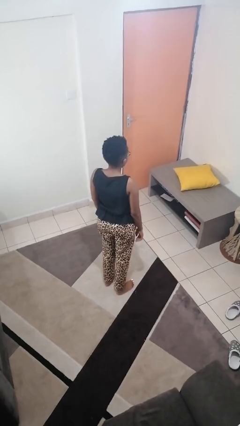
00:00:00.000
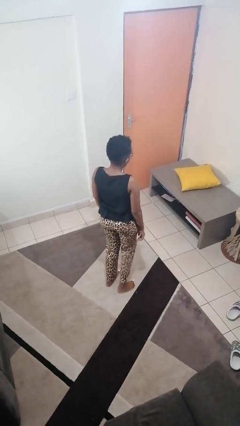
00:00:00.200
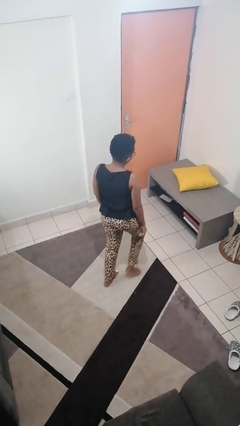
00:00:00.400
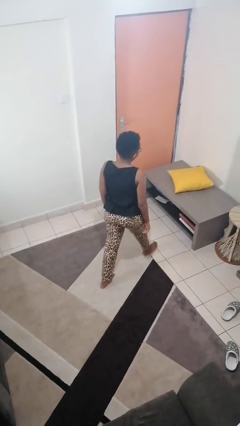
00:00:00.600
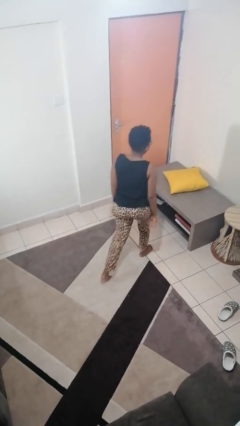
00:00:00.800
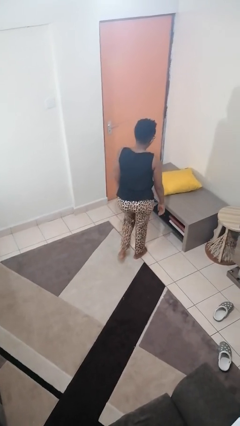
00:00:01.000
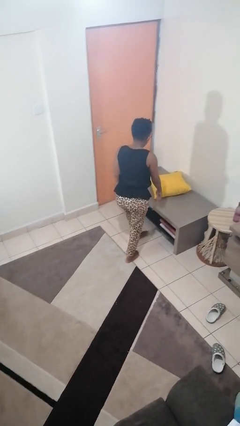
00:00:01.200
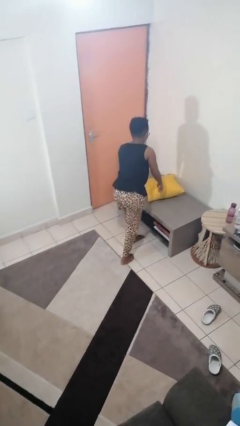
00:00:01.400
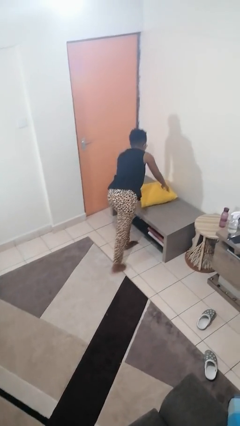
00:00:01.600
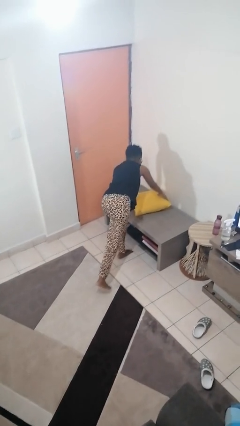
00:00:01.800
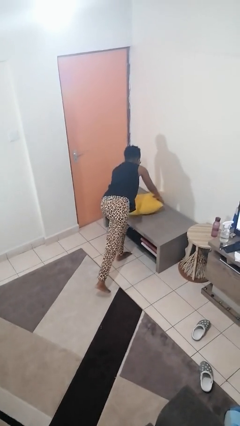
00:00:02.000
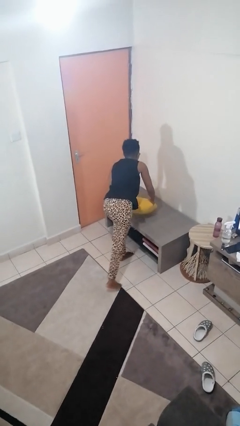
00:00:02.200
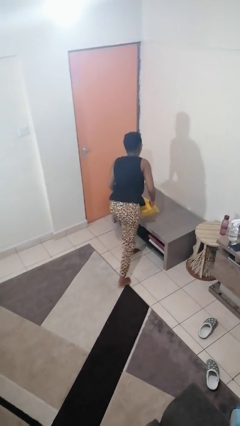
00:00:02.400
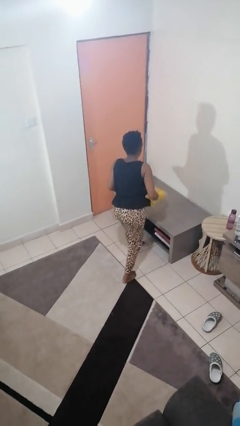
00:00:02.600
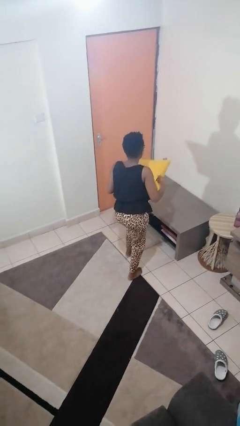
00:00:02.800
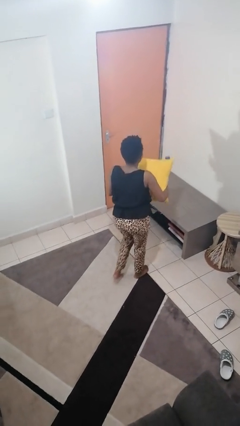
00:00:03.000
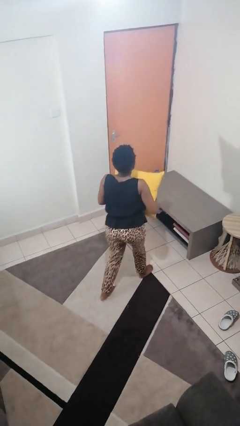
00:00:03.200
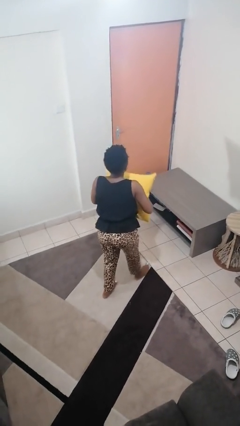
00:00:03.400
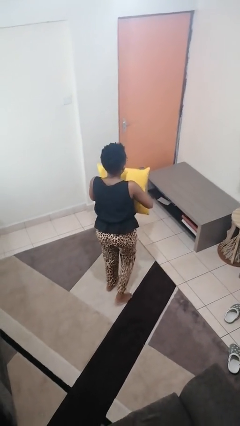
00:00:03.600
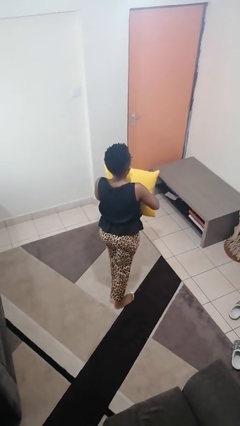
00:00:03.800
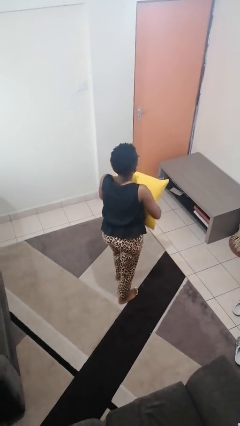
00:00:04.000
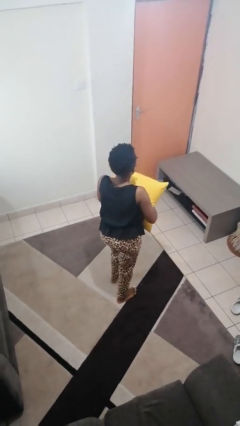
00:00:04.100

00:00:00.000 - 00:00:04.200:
person picks up object from table

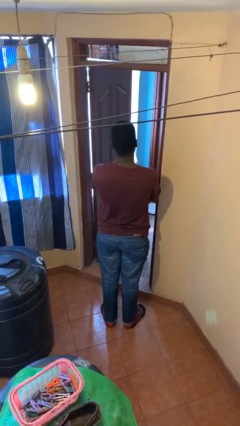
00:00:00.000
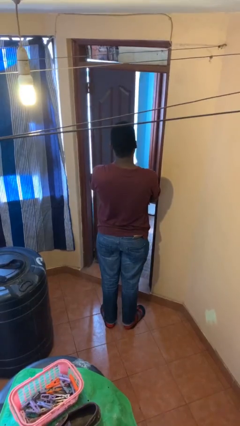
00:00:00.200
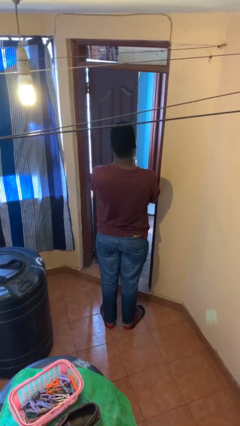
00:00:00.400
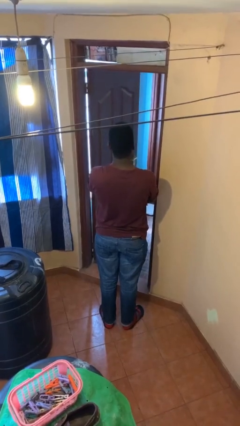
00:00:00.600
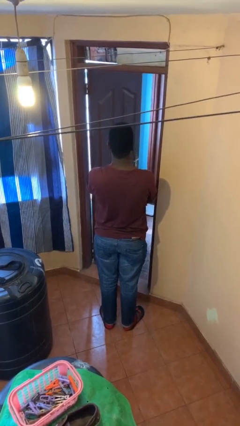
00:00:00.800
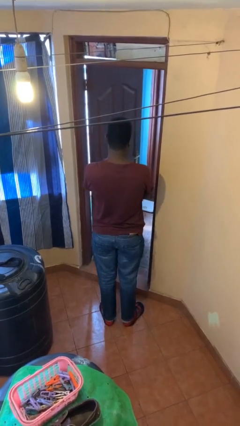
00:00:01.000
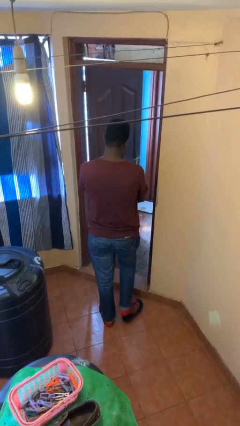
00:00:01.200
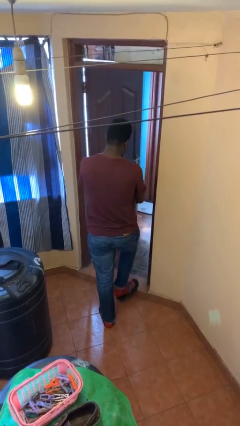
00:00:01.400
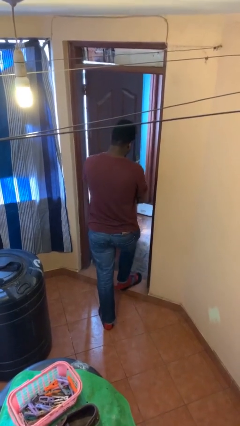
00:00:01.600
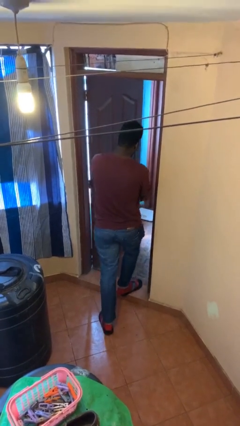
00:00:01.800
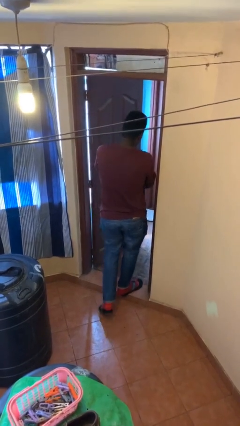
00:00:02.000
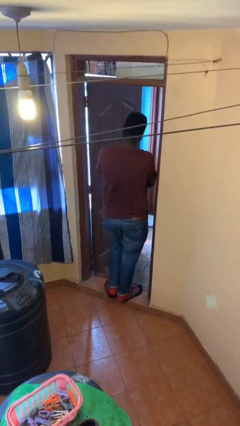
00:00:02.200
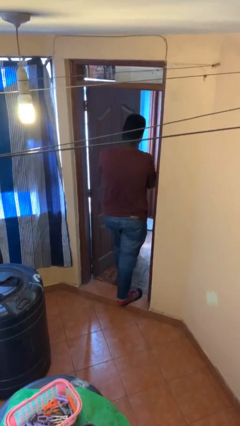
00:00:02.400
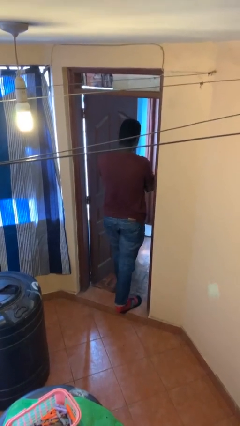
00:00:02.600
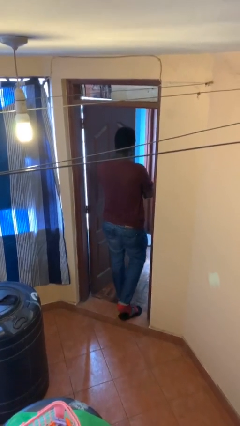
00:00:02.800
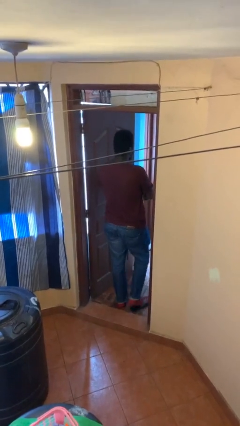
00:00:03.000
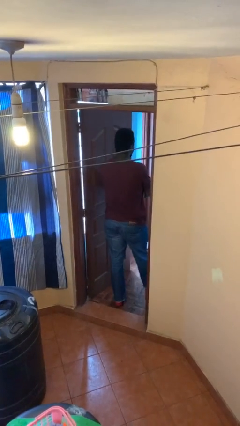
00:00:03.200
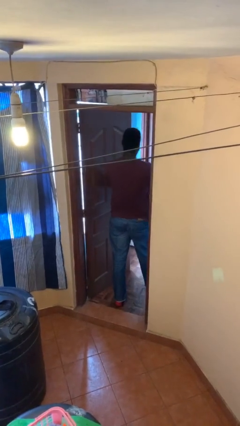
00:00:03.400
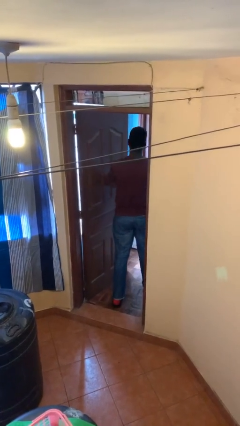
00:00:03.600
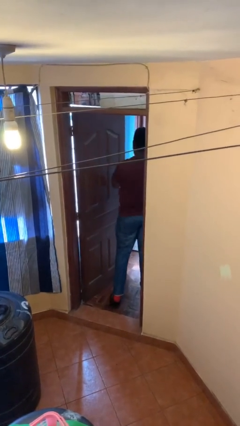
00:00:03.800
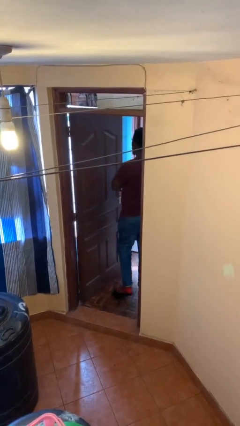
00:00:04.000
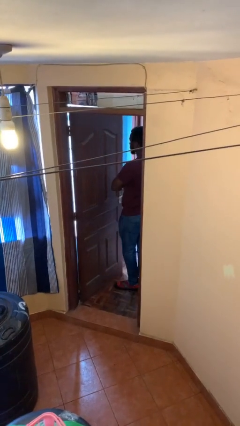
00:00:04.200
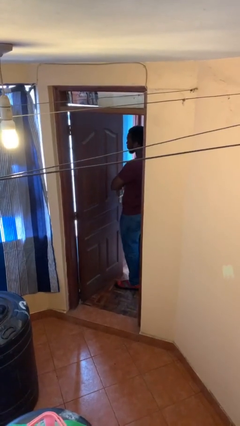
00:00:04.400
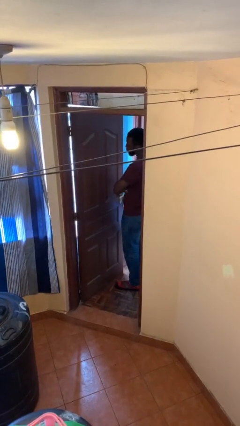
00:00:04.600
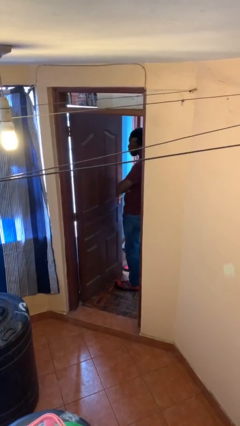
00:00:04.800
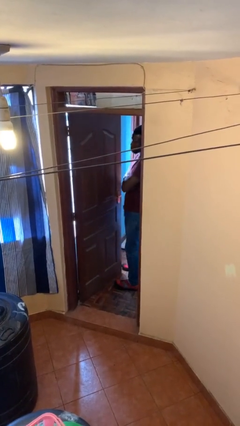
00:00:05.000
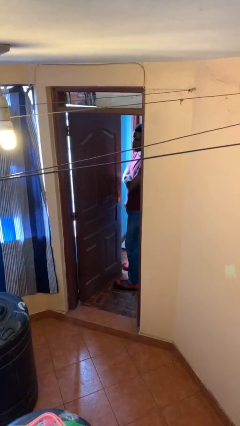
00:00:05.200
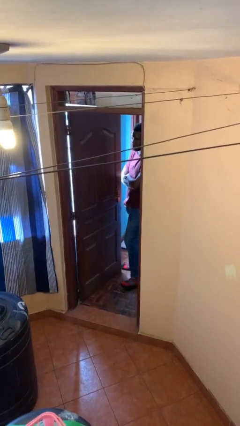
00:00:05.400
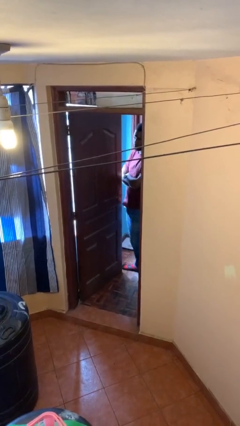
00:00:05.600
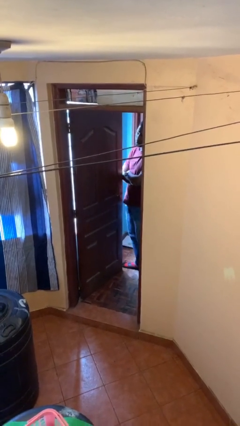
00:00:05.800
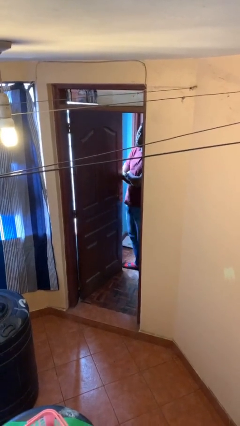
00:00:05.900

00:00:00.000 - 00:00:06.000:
person exits scene through structure

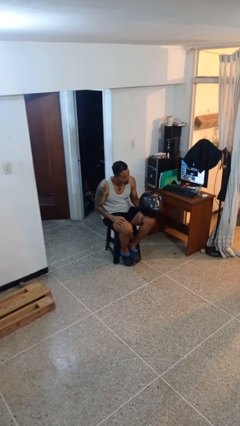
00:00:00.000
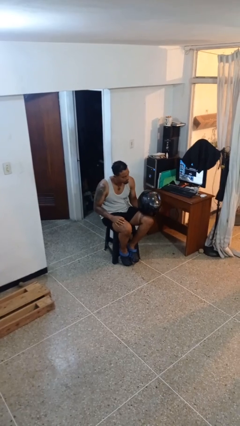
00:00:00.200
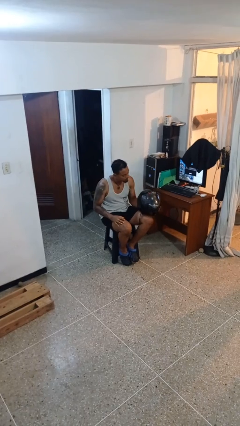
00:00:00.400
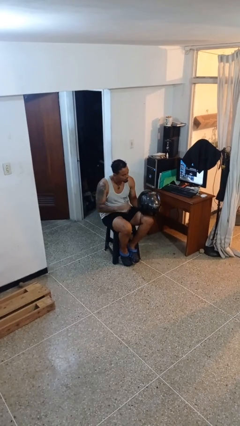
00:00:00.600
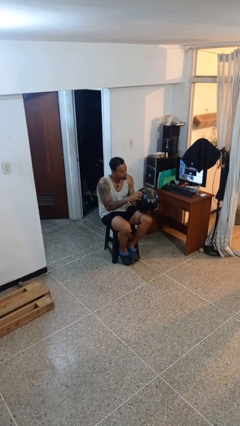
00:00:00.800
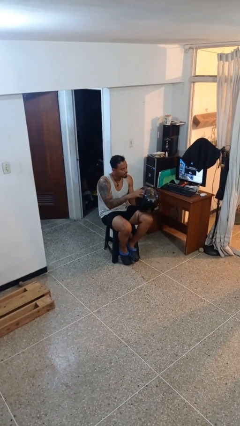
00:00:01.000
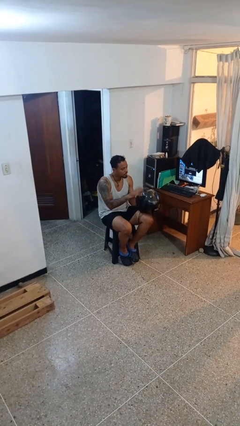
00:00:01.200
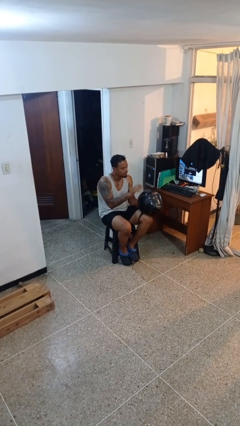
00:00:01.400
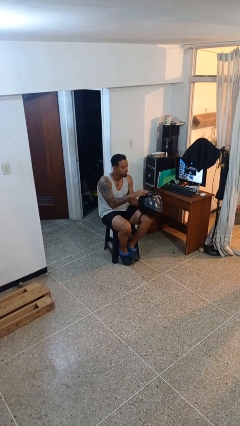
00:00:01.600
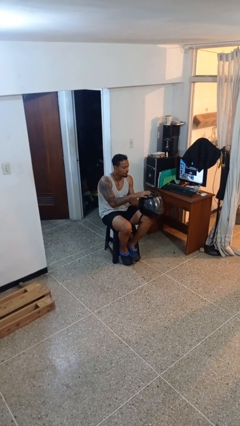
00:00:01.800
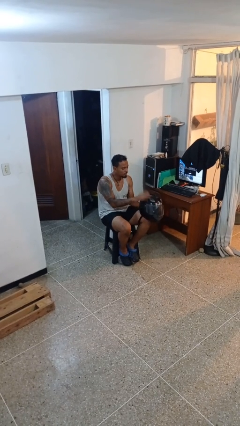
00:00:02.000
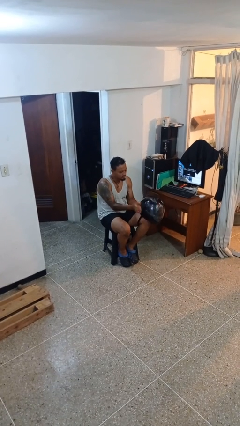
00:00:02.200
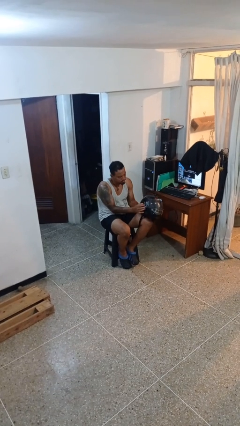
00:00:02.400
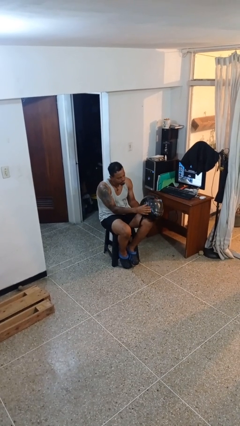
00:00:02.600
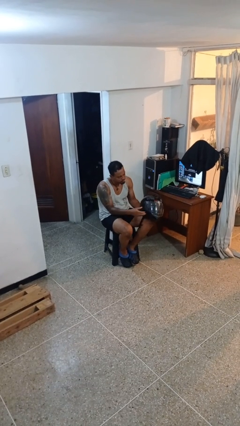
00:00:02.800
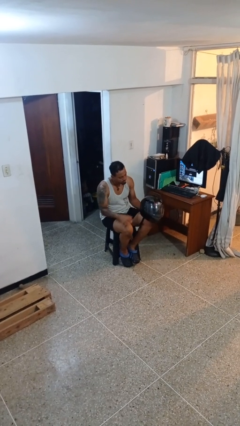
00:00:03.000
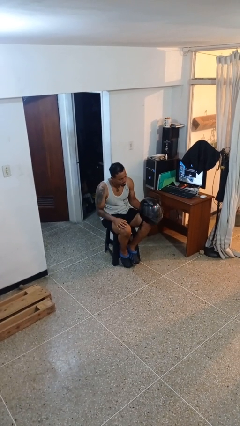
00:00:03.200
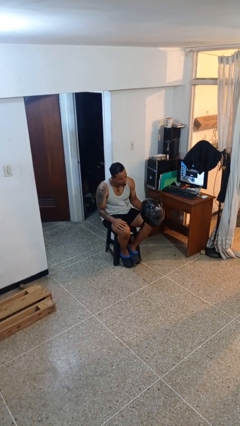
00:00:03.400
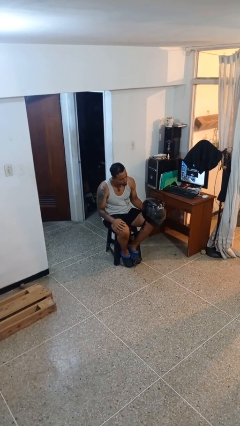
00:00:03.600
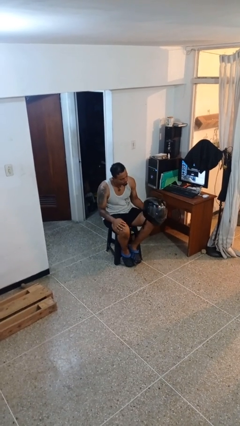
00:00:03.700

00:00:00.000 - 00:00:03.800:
person taps object with finger

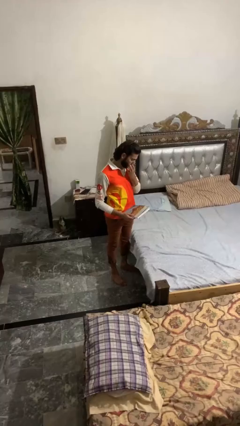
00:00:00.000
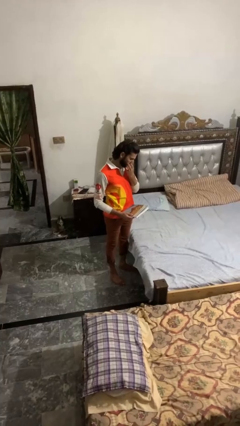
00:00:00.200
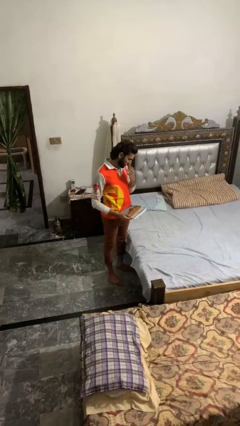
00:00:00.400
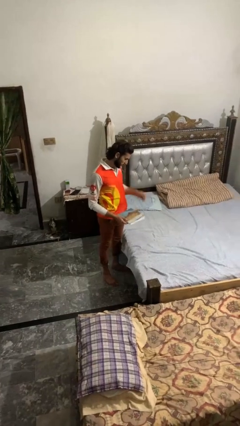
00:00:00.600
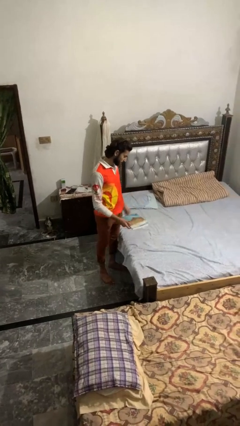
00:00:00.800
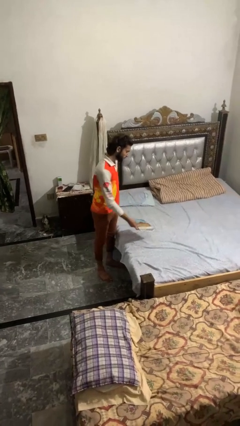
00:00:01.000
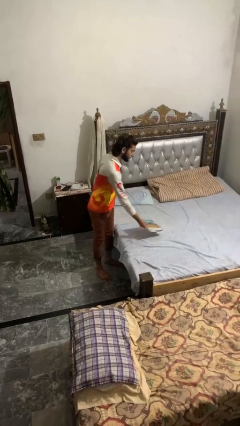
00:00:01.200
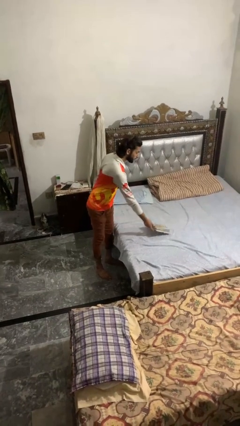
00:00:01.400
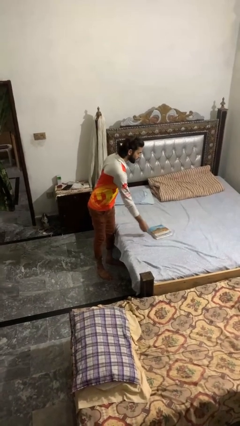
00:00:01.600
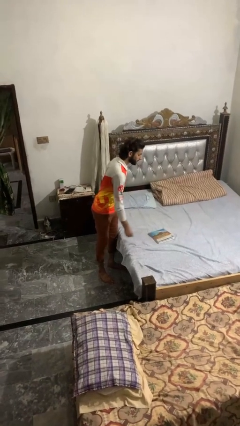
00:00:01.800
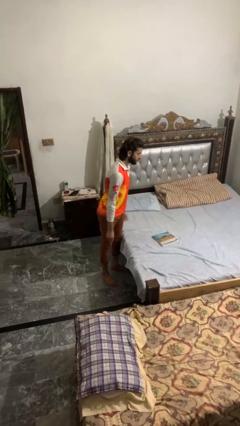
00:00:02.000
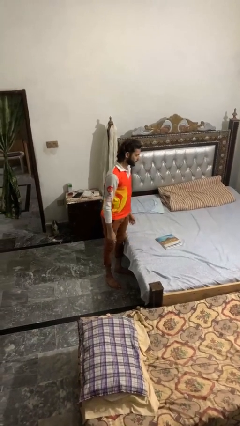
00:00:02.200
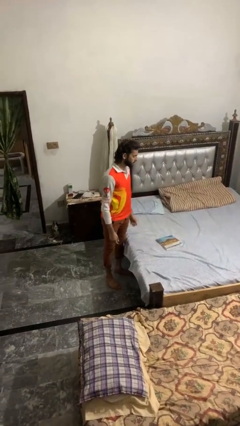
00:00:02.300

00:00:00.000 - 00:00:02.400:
person puts down object on bed

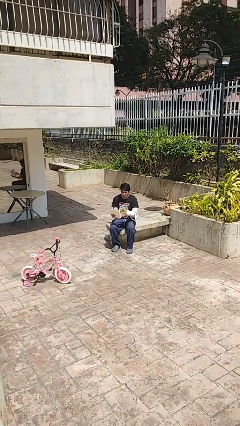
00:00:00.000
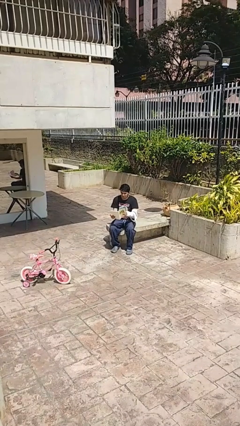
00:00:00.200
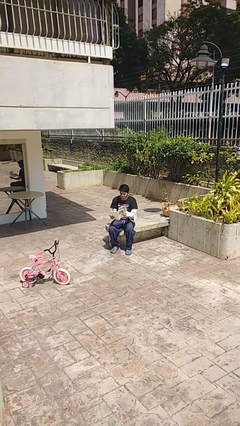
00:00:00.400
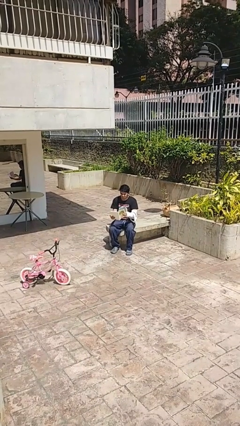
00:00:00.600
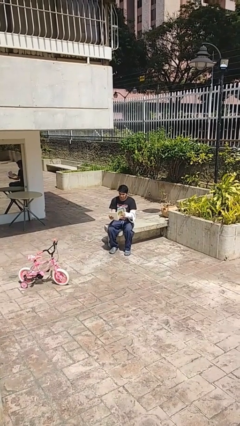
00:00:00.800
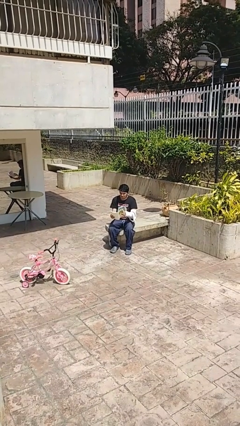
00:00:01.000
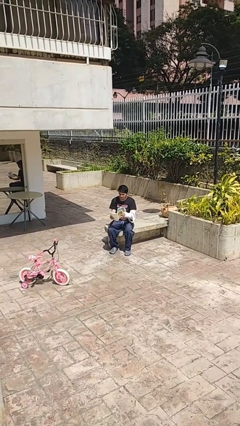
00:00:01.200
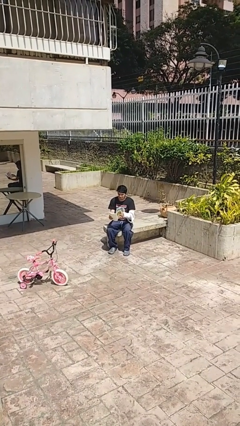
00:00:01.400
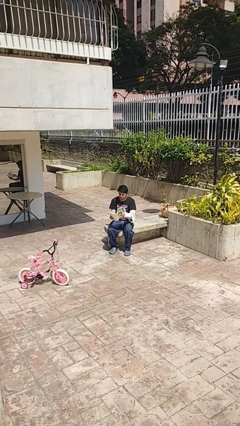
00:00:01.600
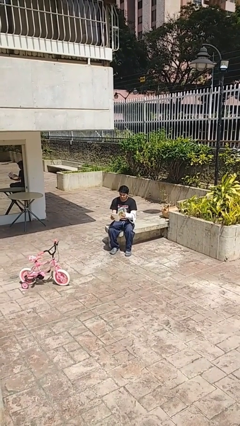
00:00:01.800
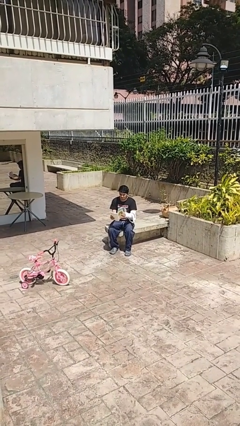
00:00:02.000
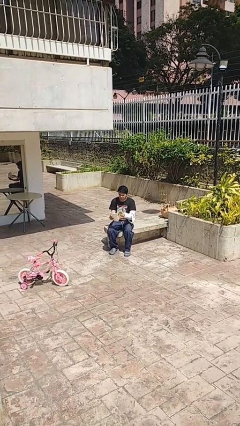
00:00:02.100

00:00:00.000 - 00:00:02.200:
person reads document
